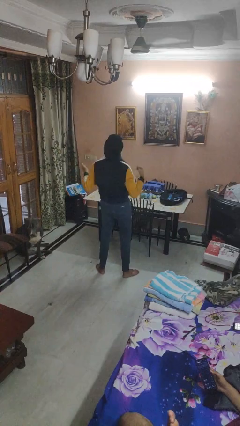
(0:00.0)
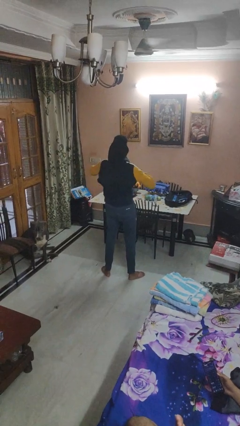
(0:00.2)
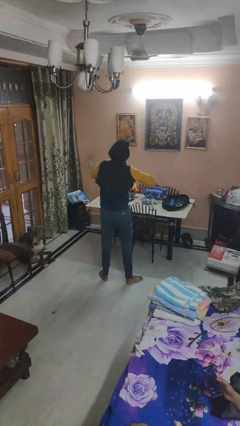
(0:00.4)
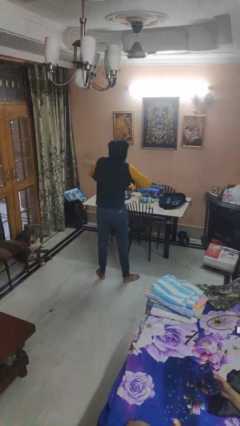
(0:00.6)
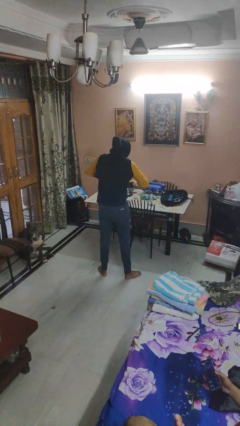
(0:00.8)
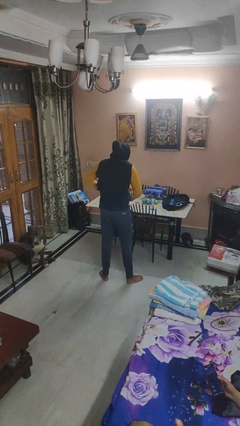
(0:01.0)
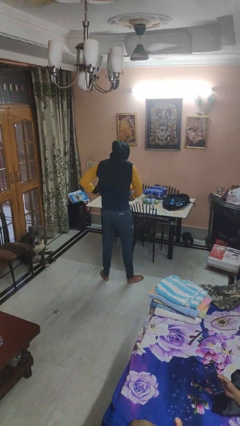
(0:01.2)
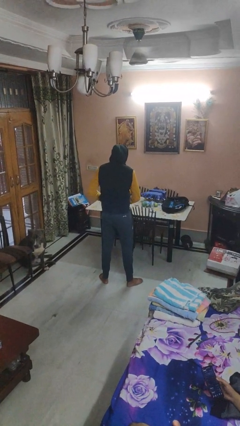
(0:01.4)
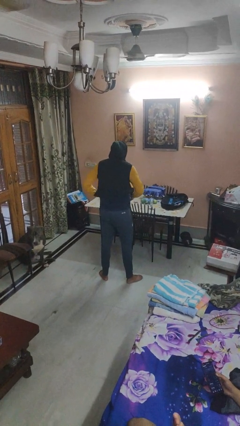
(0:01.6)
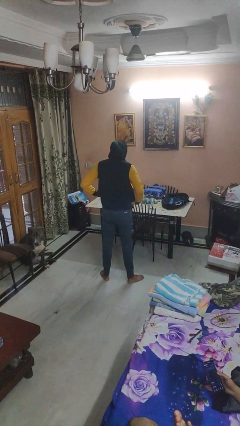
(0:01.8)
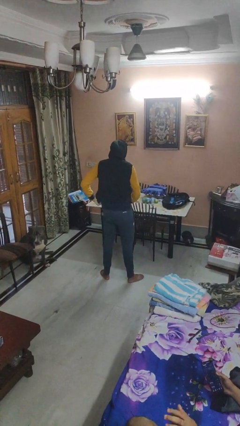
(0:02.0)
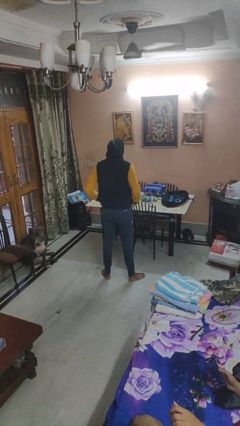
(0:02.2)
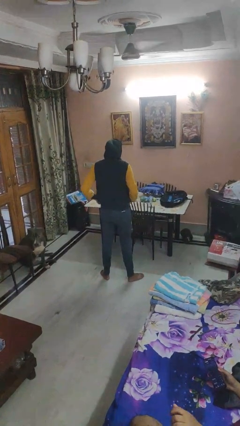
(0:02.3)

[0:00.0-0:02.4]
person puts on hoodie

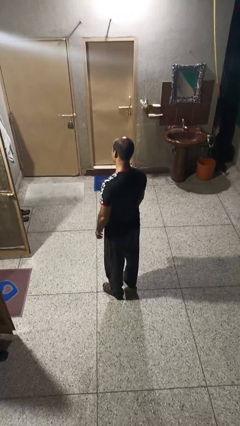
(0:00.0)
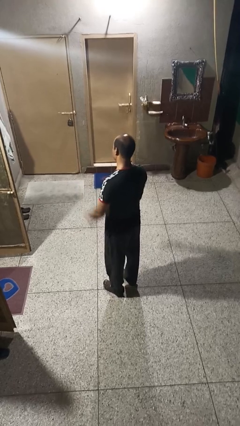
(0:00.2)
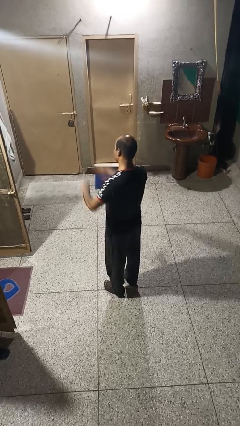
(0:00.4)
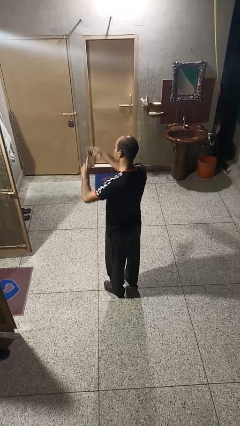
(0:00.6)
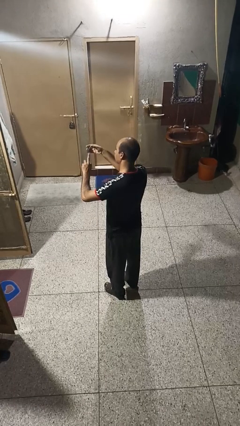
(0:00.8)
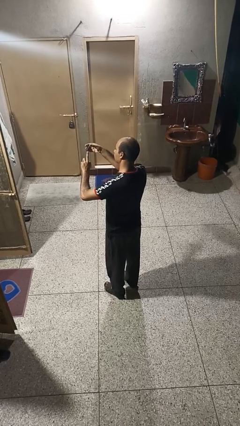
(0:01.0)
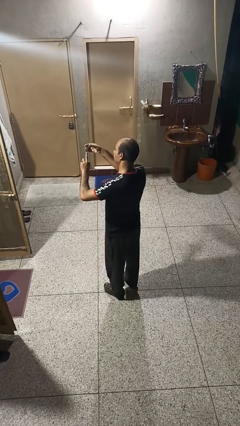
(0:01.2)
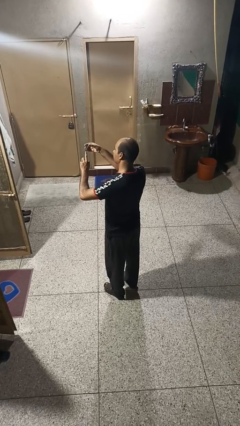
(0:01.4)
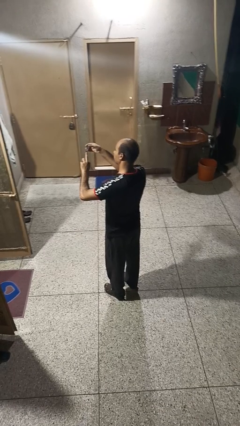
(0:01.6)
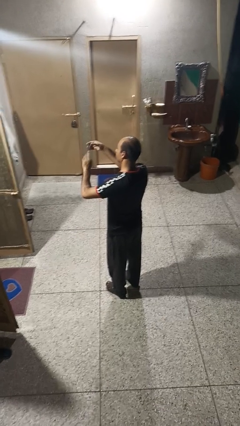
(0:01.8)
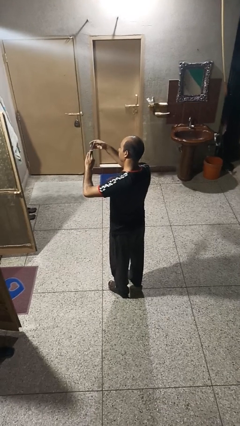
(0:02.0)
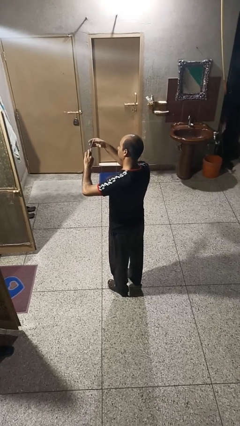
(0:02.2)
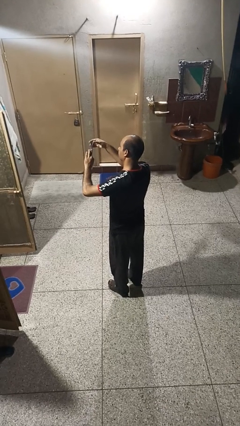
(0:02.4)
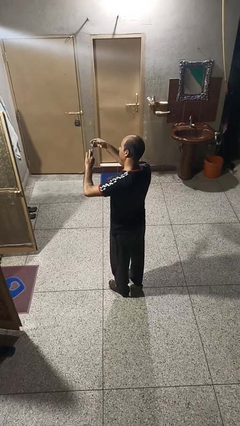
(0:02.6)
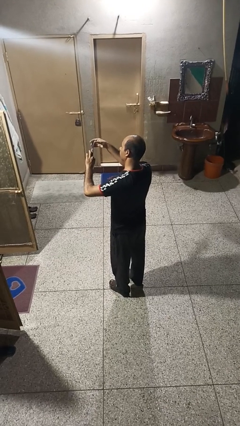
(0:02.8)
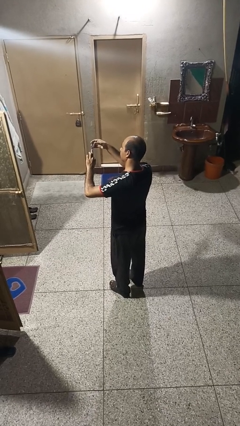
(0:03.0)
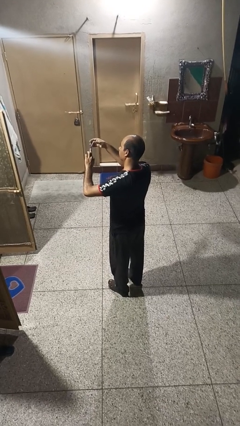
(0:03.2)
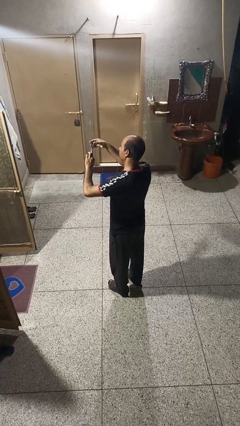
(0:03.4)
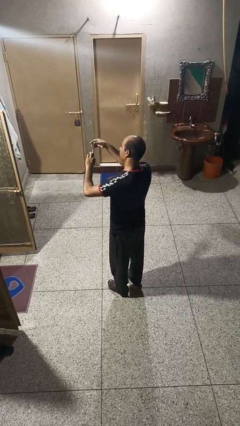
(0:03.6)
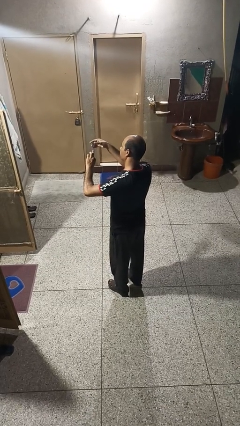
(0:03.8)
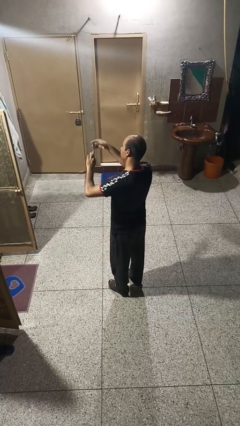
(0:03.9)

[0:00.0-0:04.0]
person clips fingernails

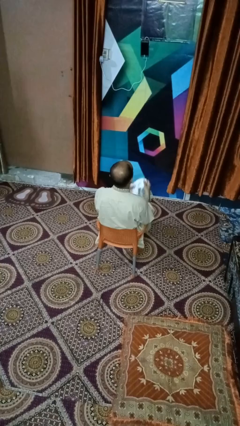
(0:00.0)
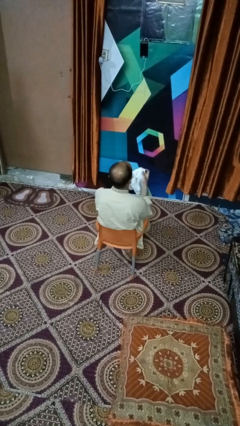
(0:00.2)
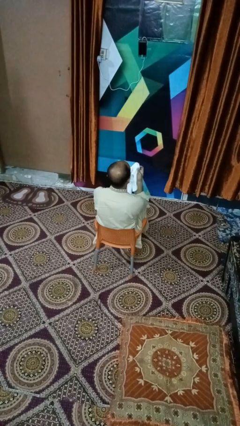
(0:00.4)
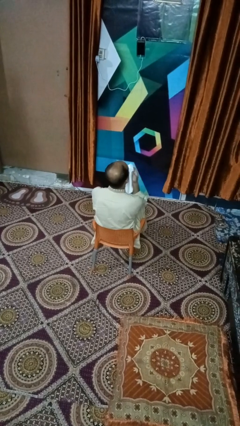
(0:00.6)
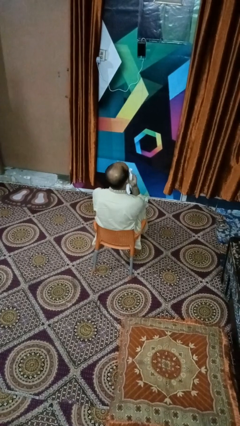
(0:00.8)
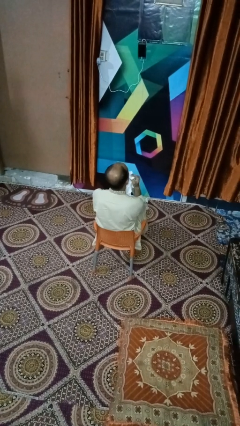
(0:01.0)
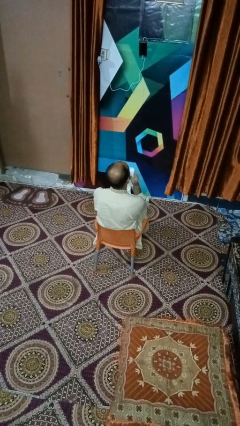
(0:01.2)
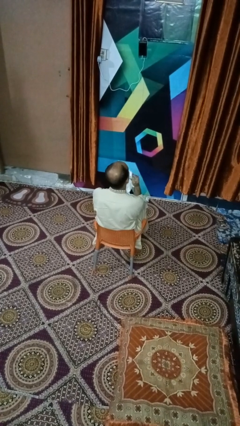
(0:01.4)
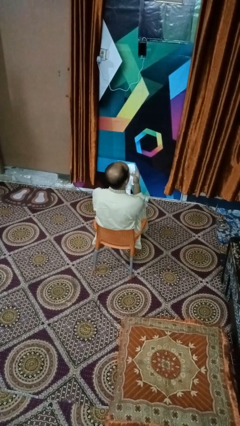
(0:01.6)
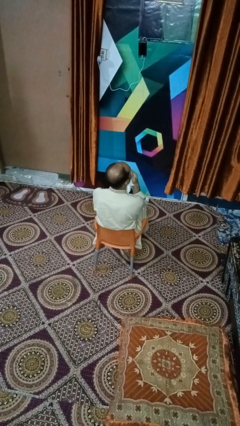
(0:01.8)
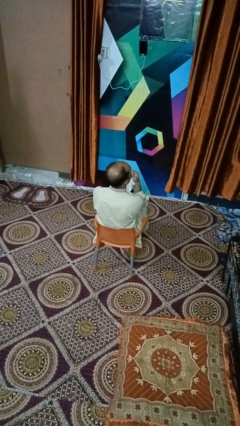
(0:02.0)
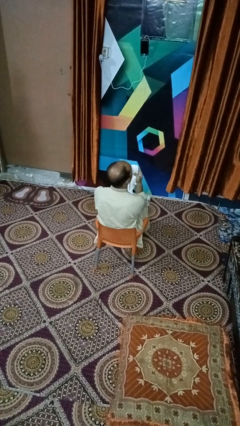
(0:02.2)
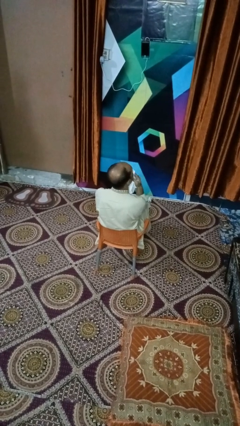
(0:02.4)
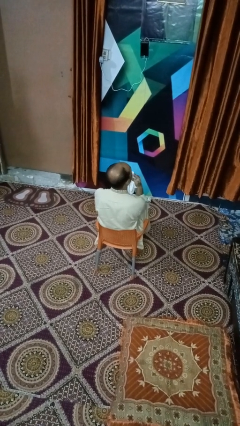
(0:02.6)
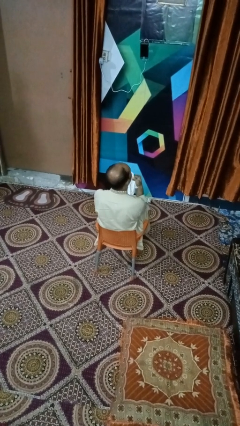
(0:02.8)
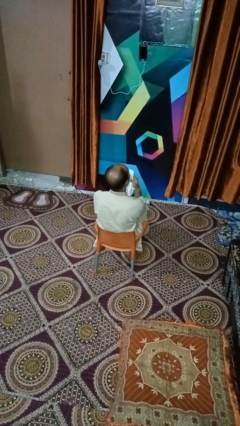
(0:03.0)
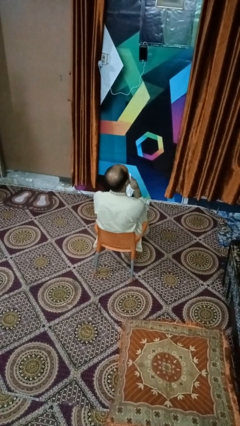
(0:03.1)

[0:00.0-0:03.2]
person wipes mouth with napkin

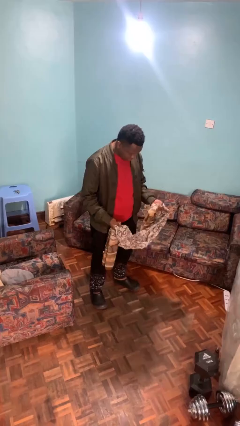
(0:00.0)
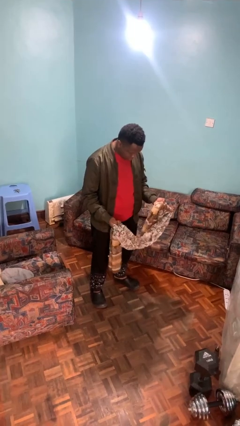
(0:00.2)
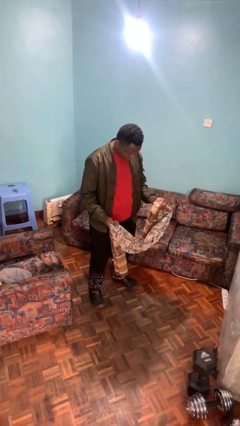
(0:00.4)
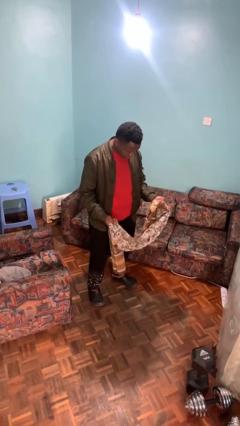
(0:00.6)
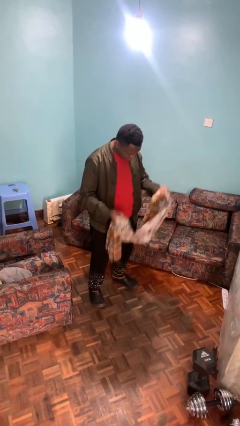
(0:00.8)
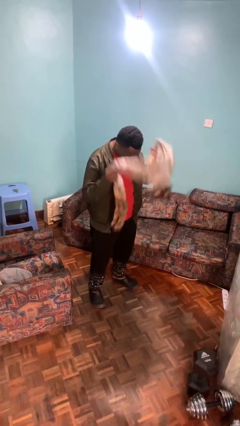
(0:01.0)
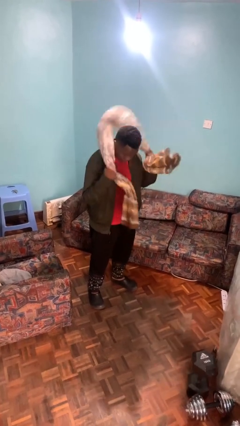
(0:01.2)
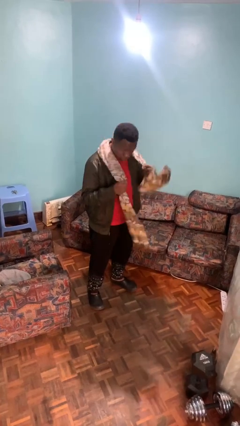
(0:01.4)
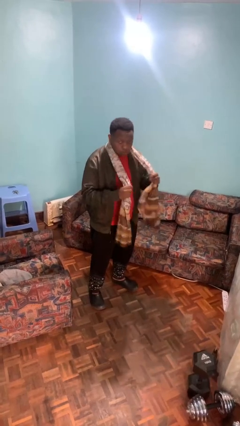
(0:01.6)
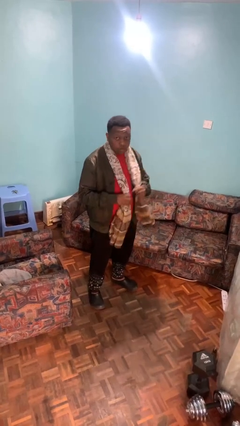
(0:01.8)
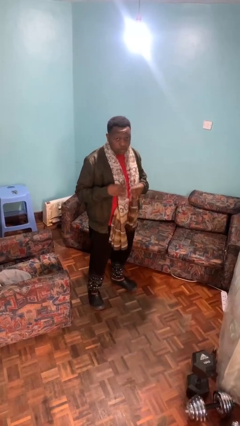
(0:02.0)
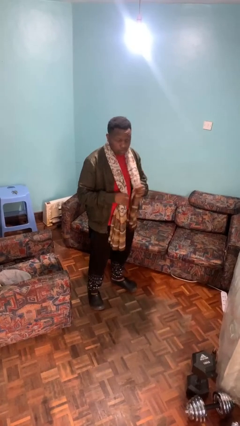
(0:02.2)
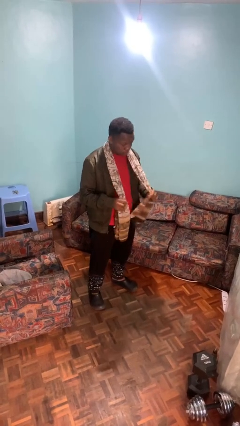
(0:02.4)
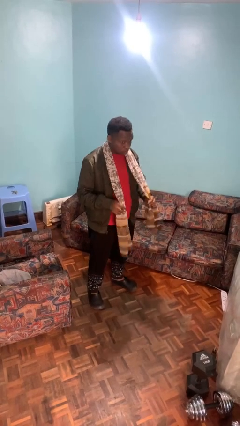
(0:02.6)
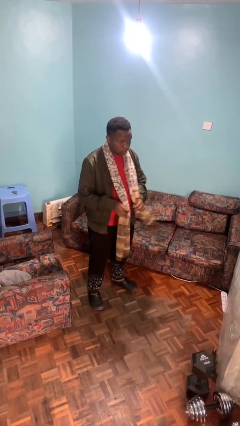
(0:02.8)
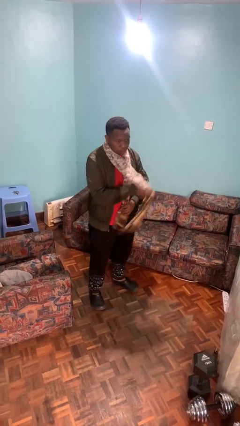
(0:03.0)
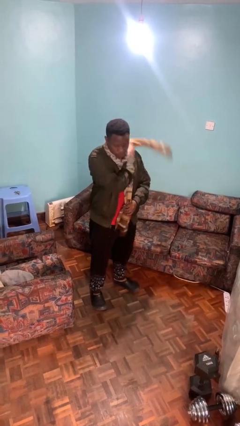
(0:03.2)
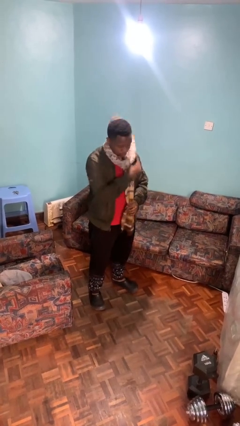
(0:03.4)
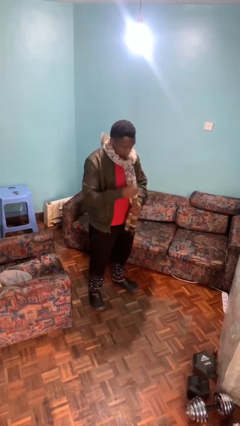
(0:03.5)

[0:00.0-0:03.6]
person puts on scarf

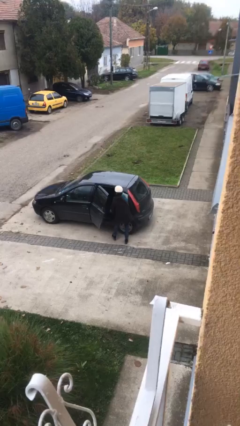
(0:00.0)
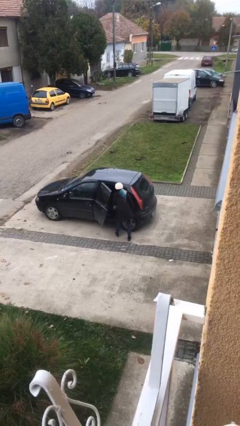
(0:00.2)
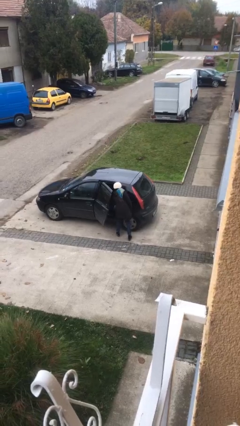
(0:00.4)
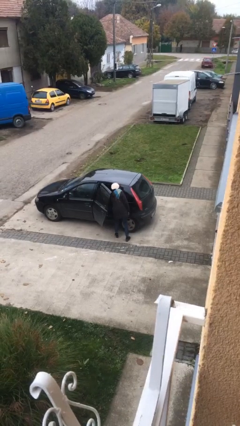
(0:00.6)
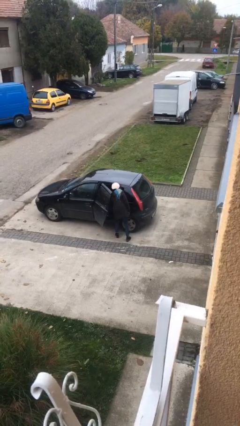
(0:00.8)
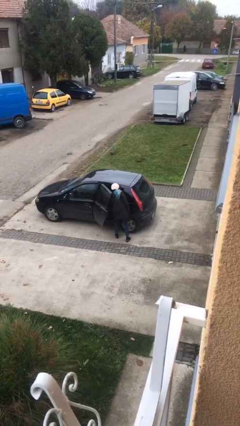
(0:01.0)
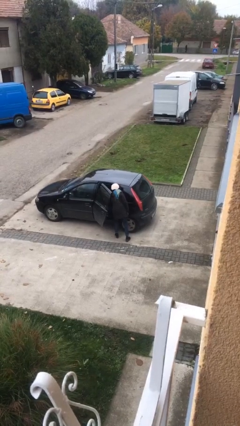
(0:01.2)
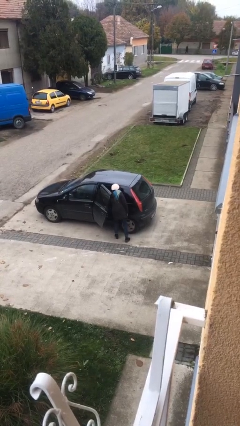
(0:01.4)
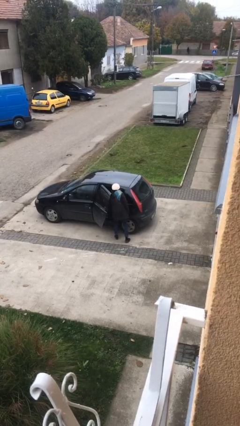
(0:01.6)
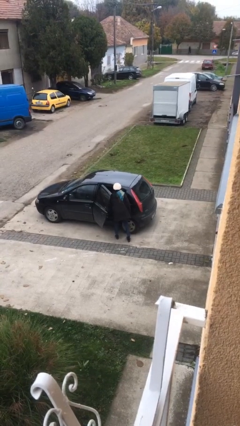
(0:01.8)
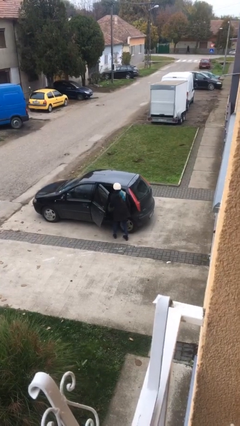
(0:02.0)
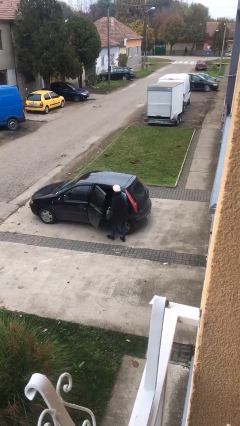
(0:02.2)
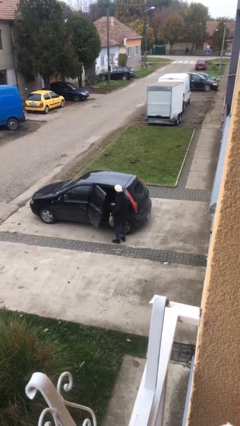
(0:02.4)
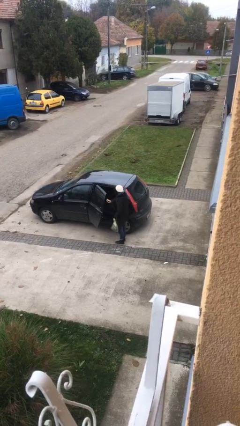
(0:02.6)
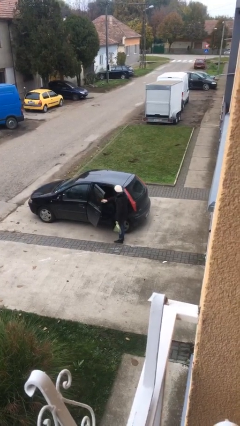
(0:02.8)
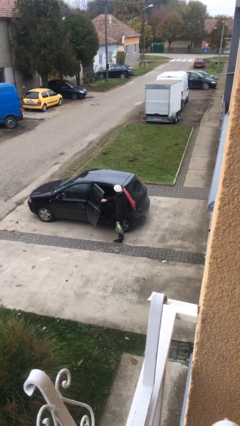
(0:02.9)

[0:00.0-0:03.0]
person unloads car

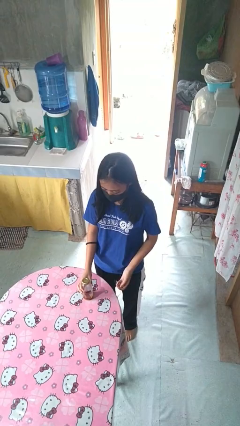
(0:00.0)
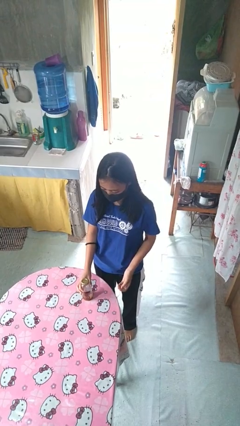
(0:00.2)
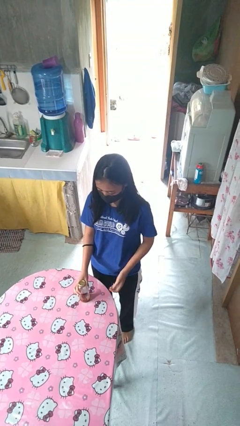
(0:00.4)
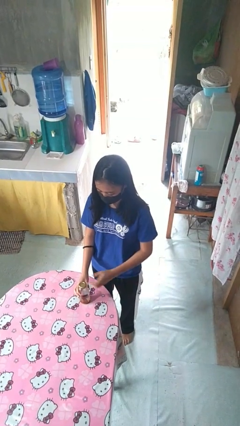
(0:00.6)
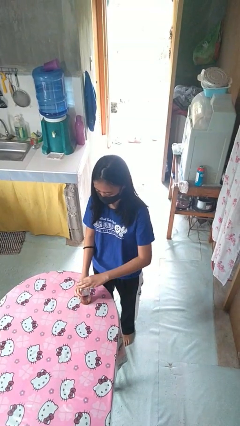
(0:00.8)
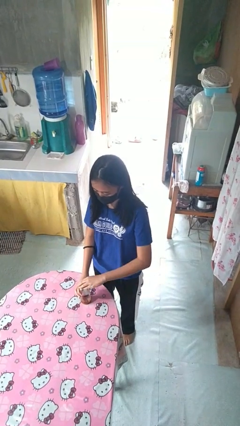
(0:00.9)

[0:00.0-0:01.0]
person opens jar

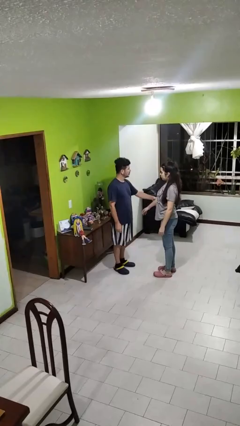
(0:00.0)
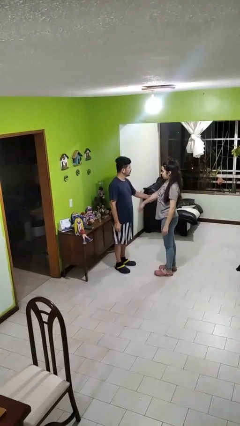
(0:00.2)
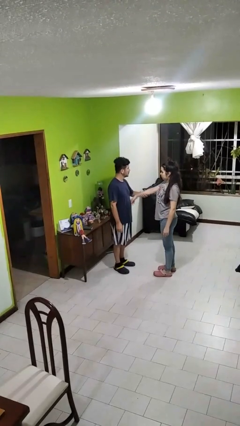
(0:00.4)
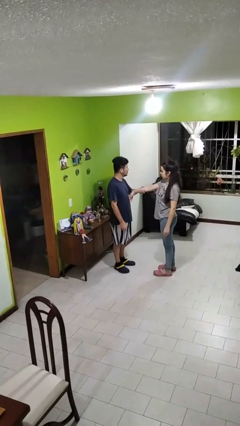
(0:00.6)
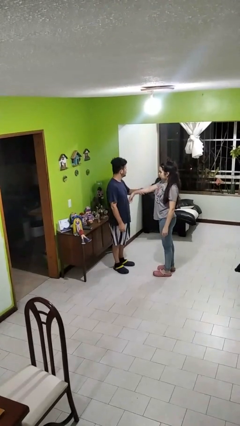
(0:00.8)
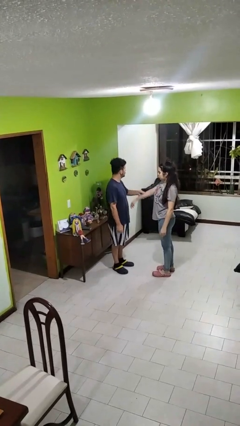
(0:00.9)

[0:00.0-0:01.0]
person grabs person by forearm
